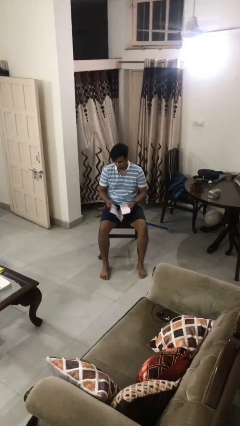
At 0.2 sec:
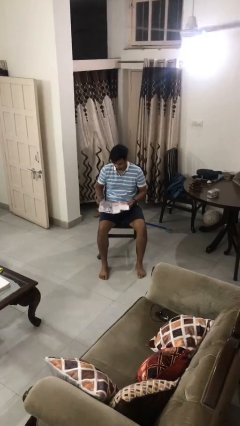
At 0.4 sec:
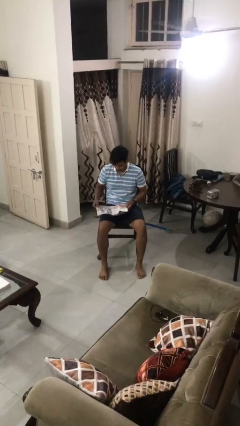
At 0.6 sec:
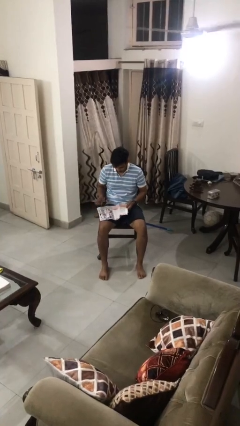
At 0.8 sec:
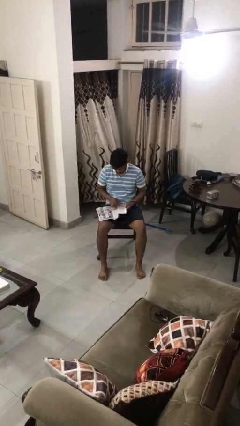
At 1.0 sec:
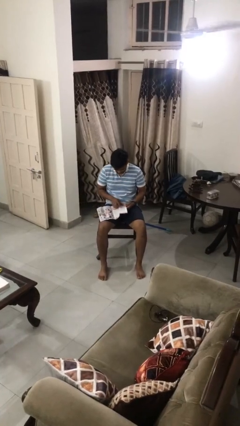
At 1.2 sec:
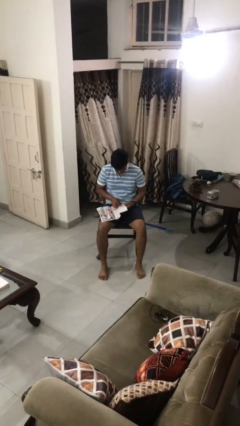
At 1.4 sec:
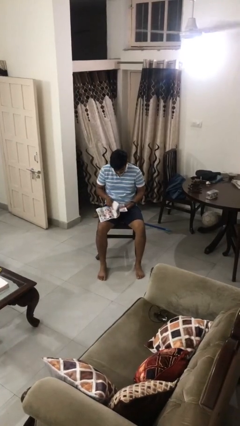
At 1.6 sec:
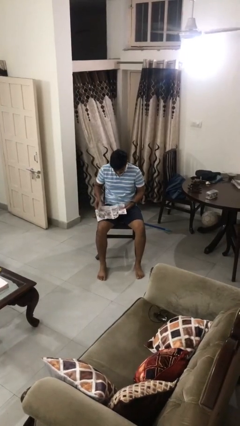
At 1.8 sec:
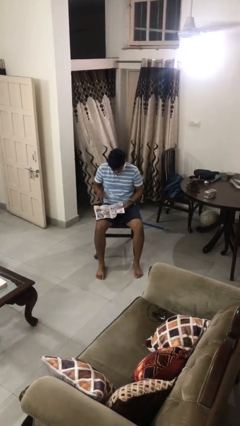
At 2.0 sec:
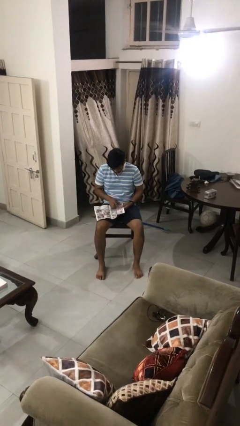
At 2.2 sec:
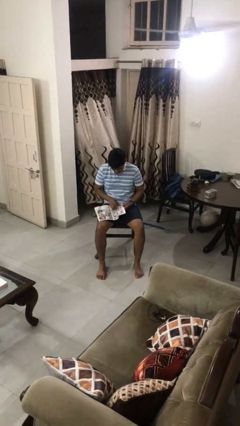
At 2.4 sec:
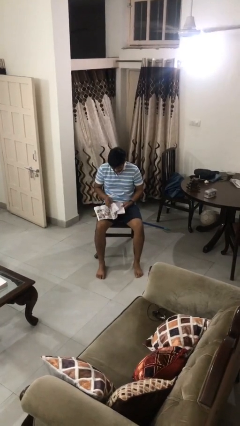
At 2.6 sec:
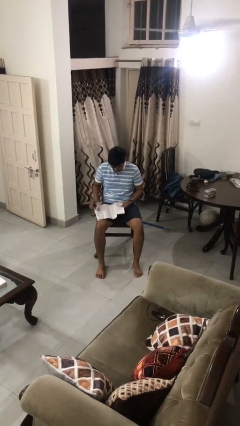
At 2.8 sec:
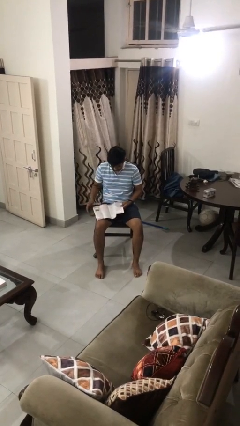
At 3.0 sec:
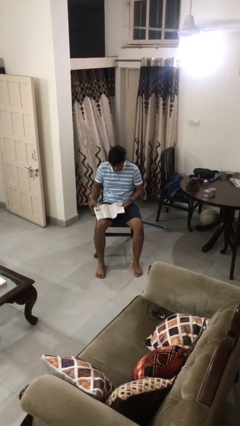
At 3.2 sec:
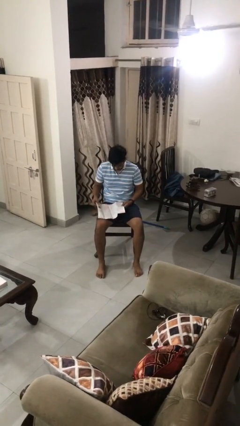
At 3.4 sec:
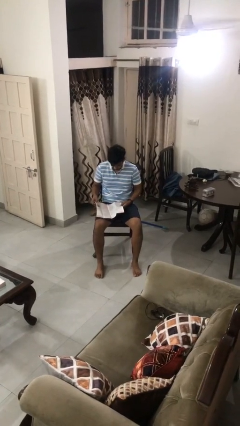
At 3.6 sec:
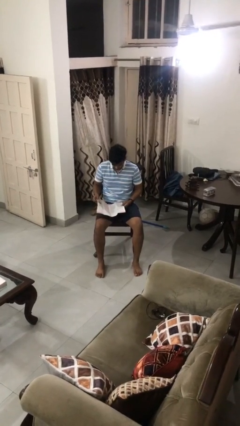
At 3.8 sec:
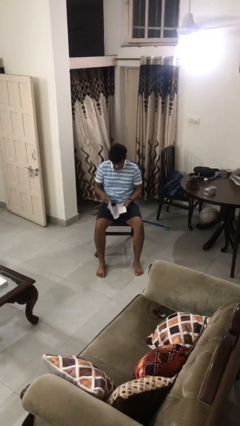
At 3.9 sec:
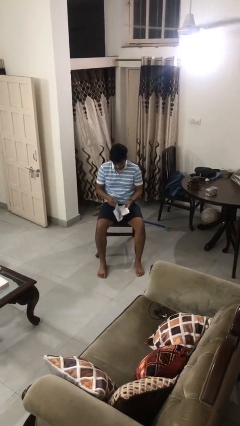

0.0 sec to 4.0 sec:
person reads magazine

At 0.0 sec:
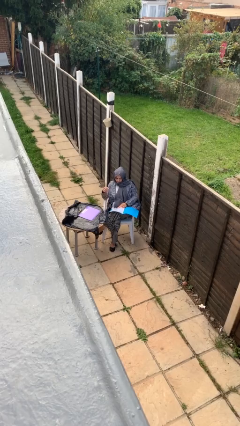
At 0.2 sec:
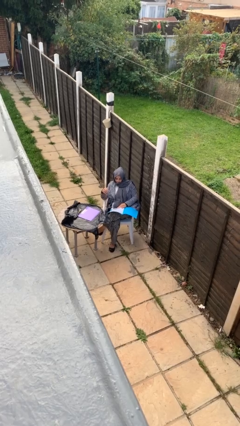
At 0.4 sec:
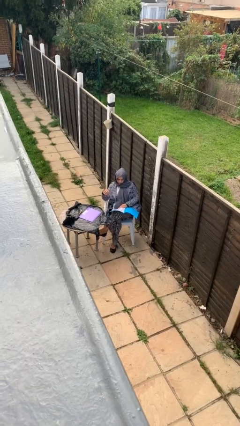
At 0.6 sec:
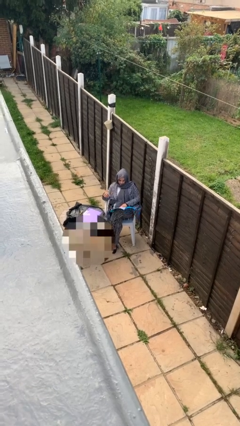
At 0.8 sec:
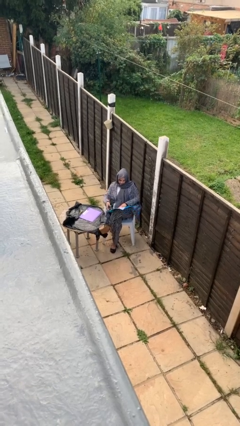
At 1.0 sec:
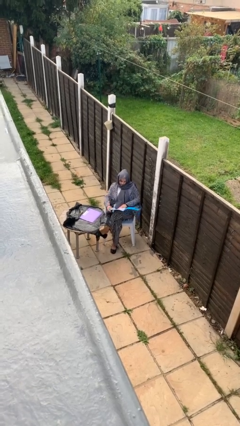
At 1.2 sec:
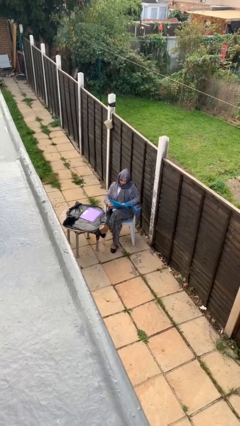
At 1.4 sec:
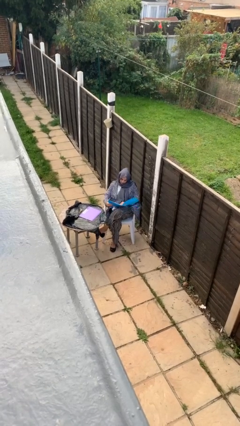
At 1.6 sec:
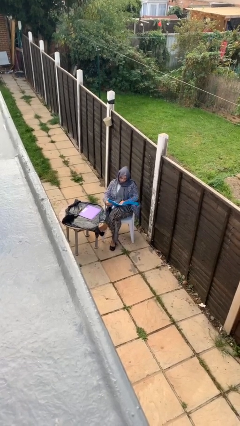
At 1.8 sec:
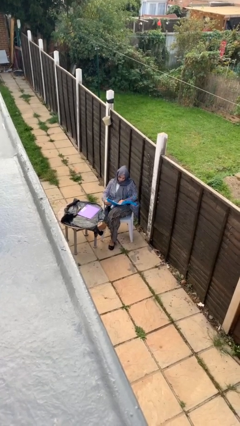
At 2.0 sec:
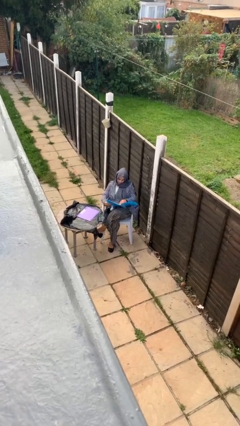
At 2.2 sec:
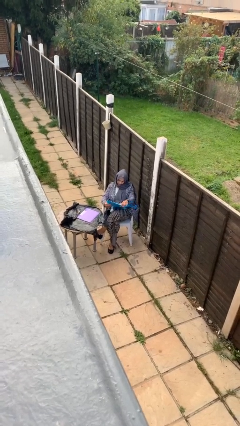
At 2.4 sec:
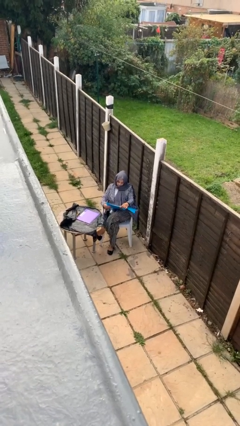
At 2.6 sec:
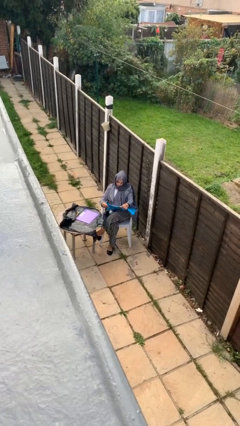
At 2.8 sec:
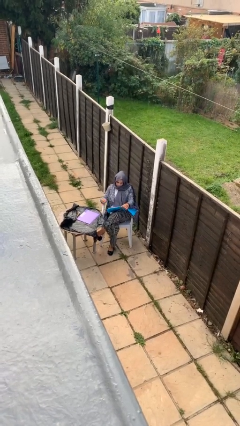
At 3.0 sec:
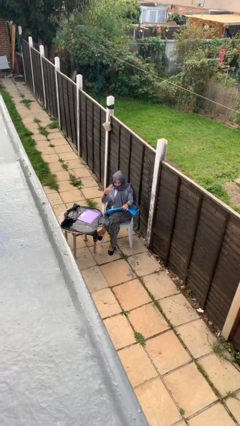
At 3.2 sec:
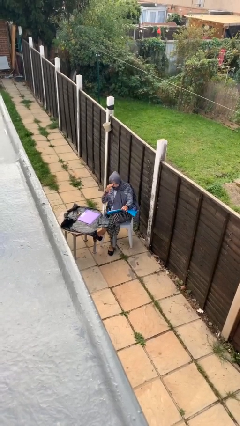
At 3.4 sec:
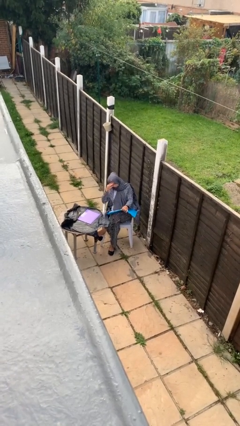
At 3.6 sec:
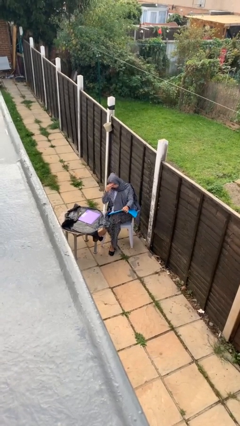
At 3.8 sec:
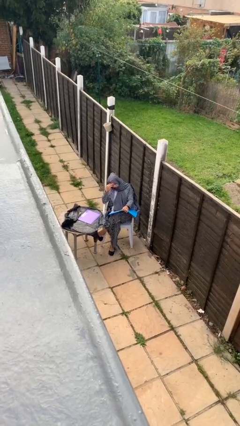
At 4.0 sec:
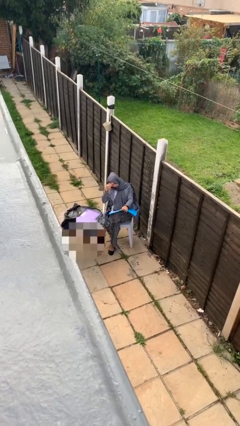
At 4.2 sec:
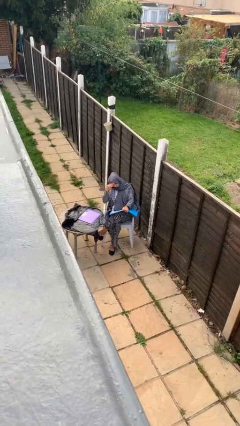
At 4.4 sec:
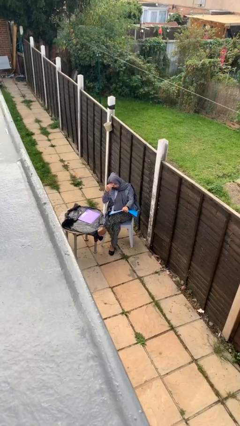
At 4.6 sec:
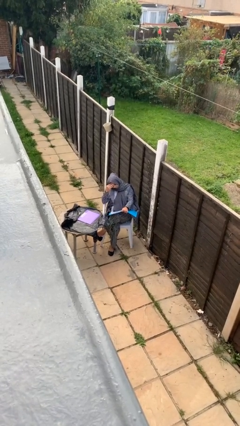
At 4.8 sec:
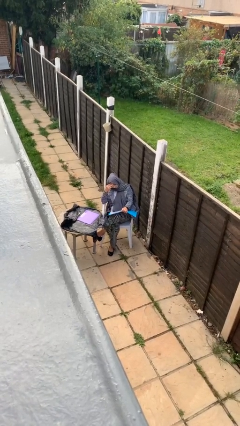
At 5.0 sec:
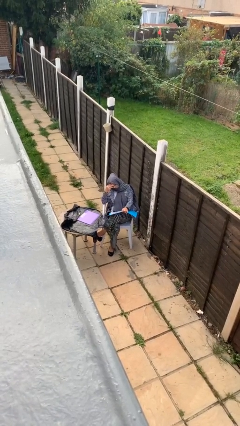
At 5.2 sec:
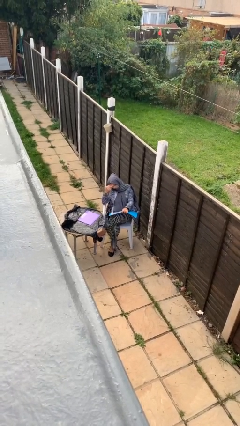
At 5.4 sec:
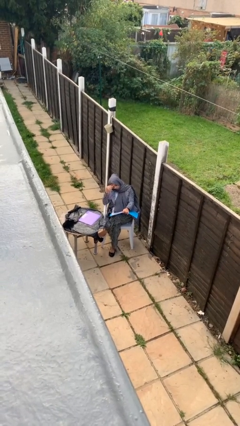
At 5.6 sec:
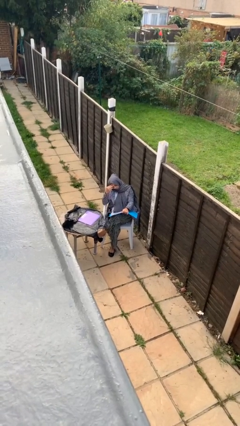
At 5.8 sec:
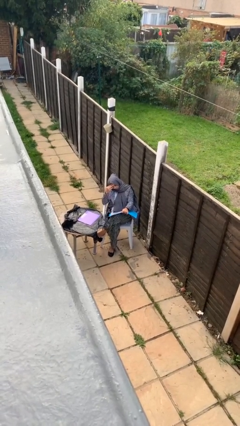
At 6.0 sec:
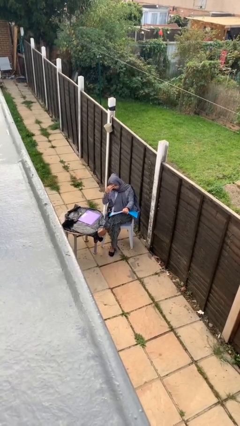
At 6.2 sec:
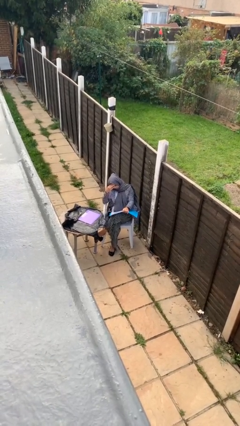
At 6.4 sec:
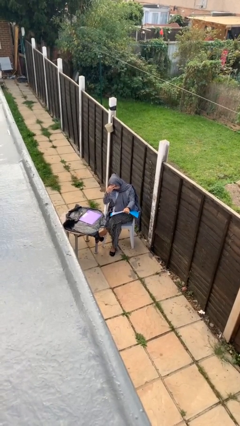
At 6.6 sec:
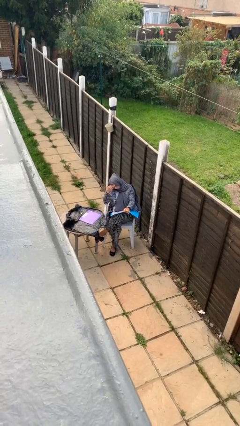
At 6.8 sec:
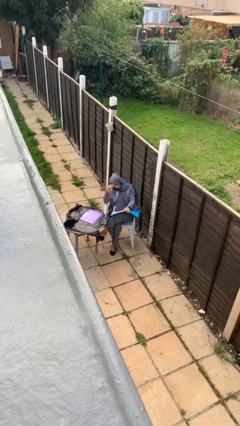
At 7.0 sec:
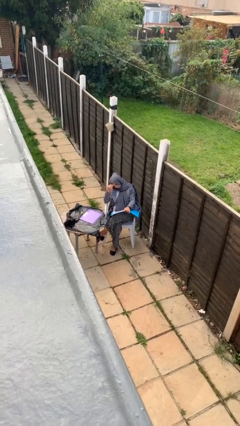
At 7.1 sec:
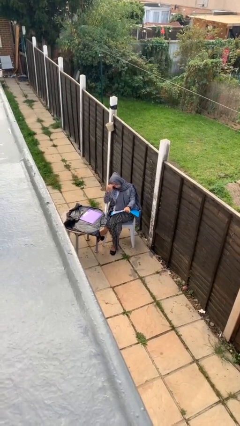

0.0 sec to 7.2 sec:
person reads document

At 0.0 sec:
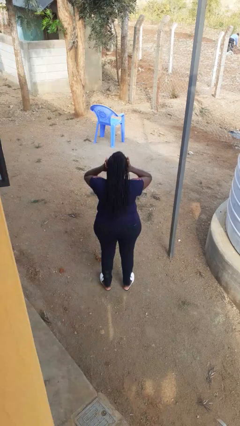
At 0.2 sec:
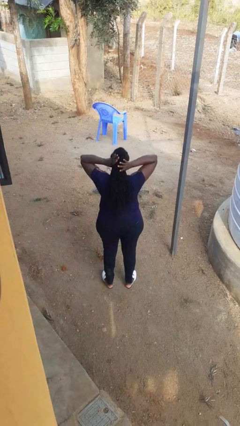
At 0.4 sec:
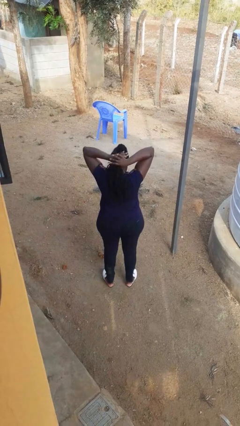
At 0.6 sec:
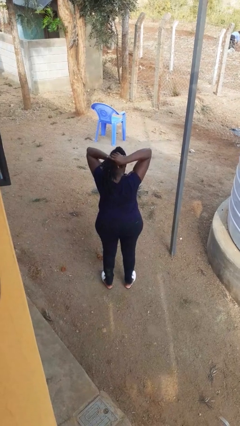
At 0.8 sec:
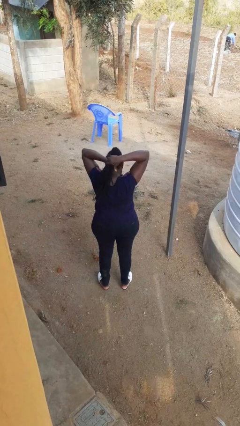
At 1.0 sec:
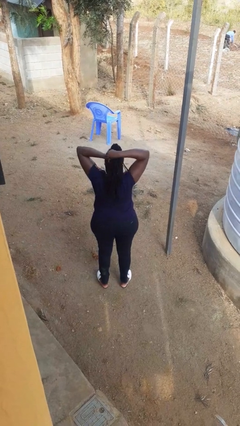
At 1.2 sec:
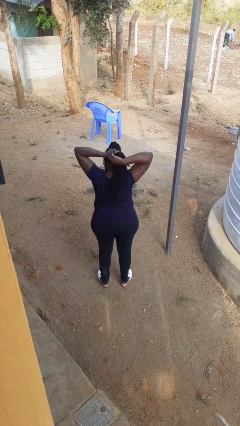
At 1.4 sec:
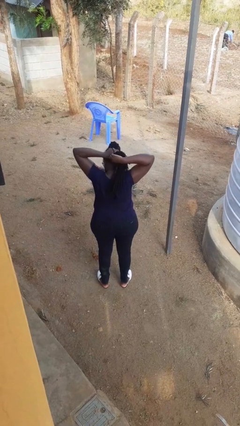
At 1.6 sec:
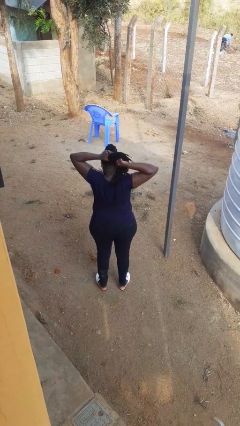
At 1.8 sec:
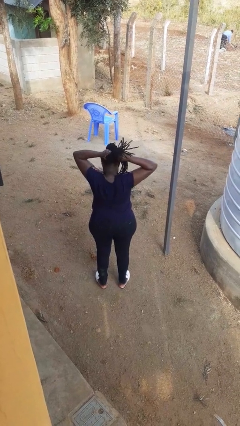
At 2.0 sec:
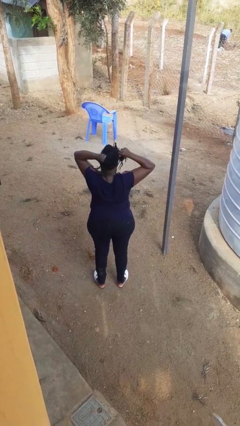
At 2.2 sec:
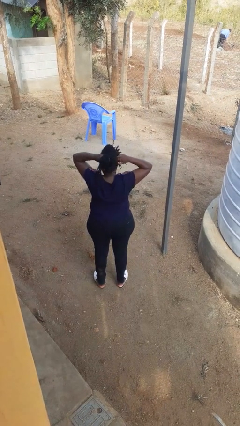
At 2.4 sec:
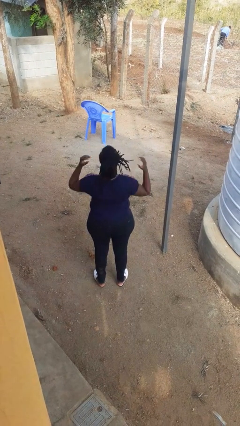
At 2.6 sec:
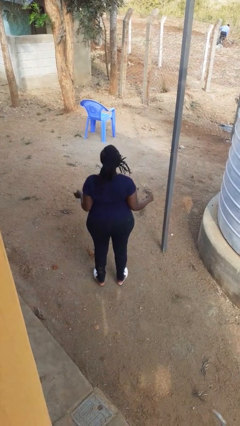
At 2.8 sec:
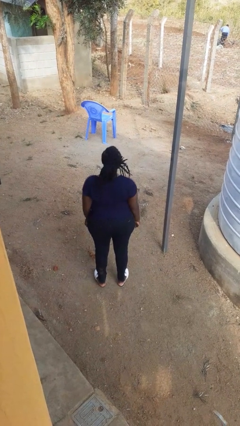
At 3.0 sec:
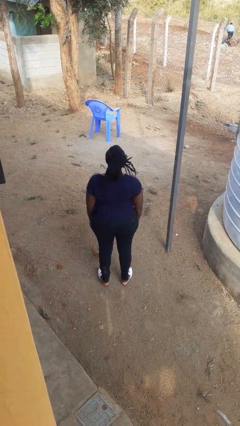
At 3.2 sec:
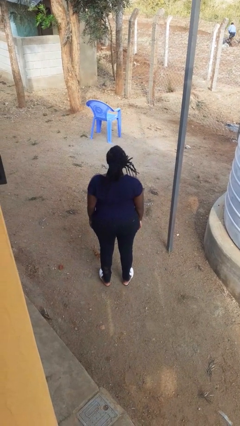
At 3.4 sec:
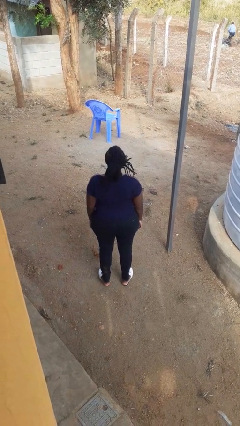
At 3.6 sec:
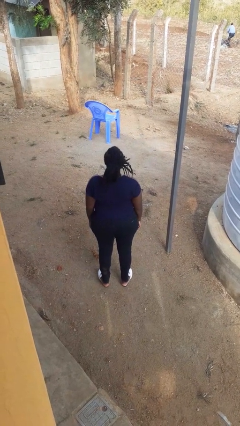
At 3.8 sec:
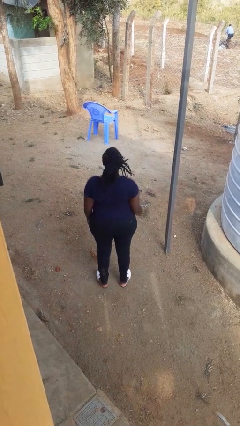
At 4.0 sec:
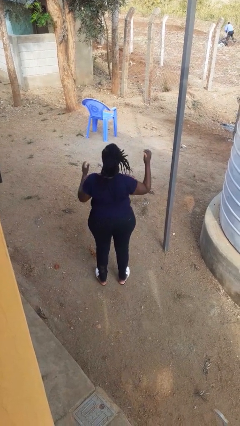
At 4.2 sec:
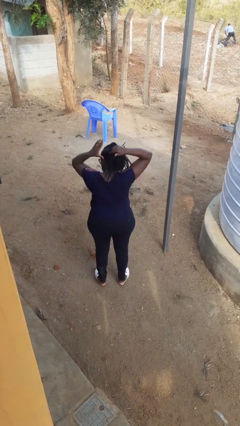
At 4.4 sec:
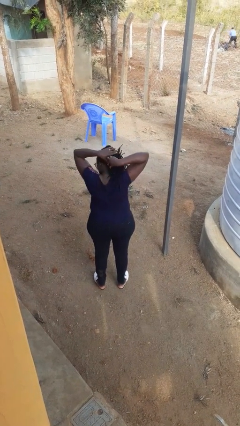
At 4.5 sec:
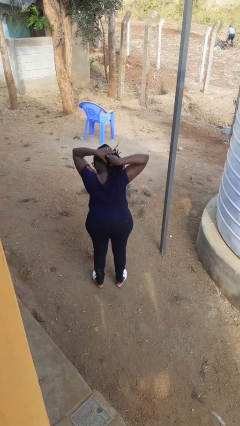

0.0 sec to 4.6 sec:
person puts hair in ponytail

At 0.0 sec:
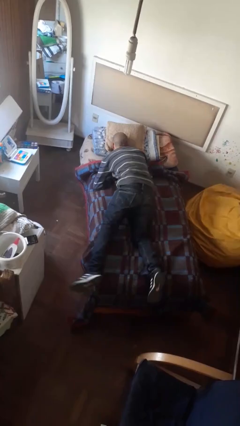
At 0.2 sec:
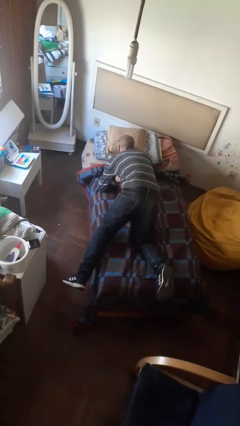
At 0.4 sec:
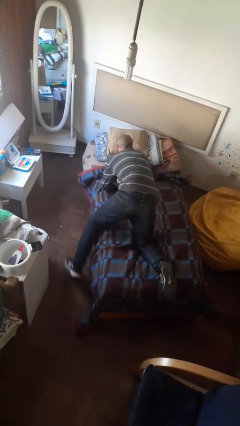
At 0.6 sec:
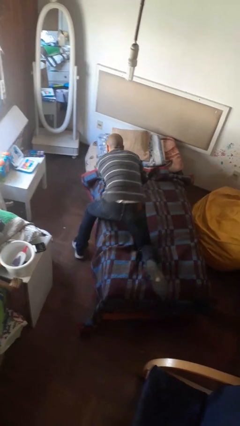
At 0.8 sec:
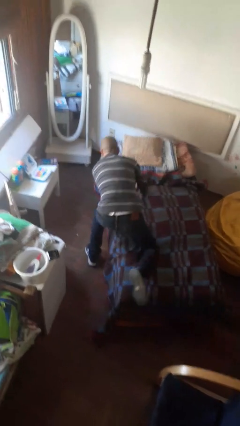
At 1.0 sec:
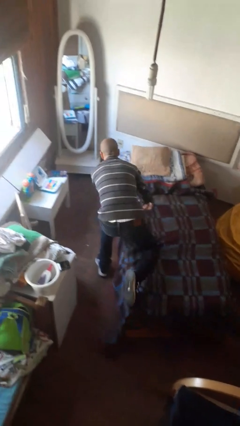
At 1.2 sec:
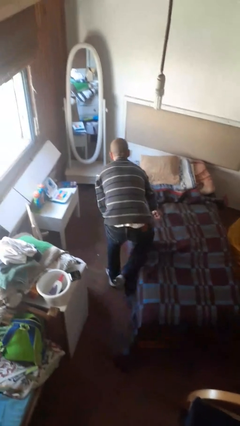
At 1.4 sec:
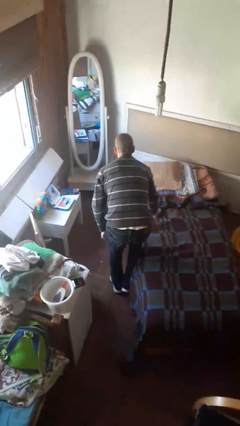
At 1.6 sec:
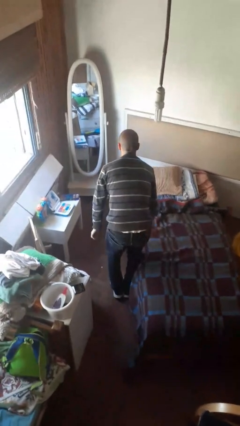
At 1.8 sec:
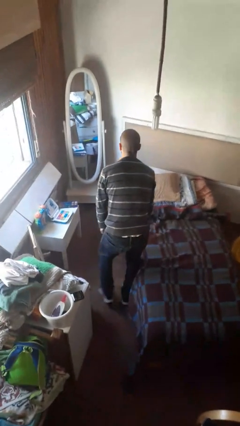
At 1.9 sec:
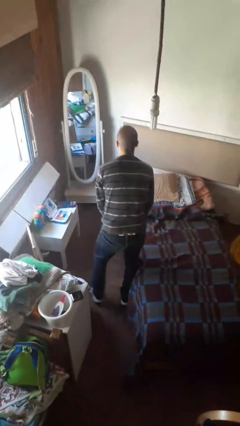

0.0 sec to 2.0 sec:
person stands up
